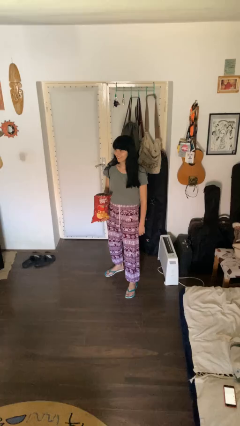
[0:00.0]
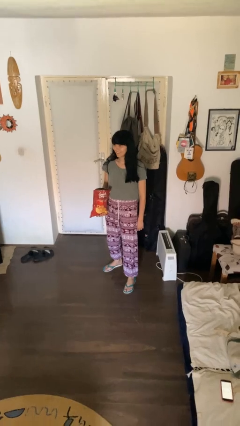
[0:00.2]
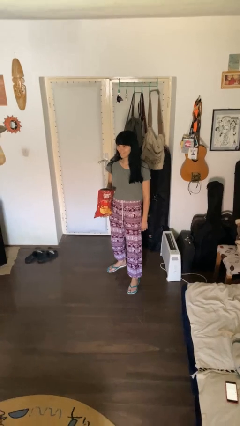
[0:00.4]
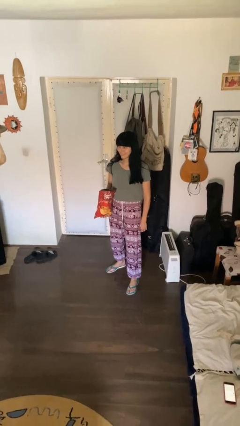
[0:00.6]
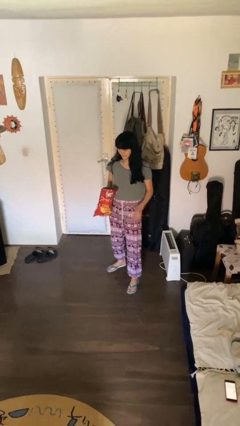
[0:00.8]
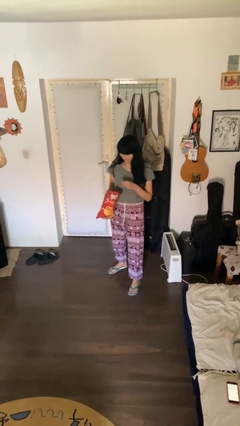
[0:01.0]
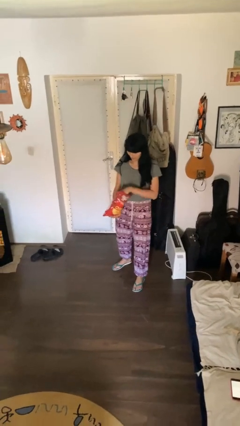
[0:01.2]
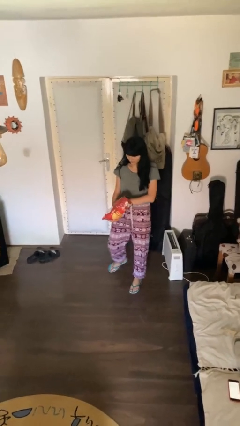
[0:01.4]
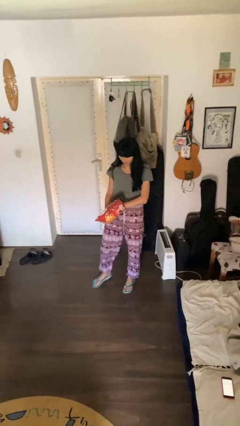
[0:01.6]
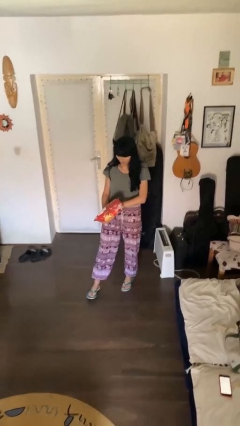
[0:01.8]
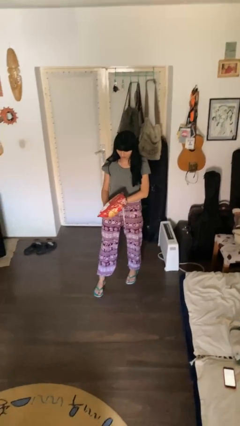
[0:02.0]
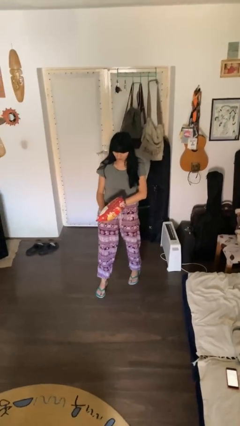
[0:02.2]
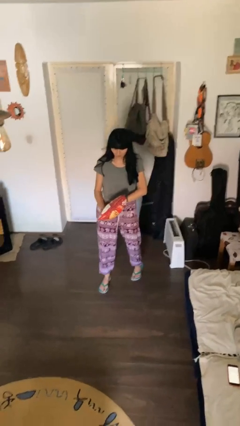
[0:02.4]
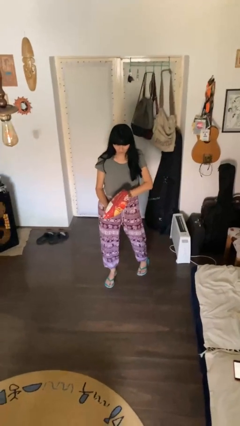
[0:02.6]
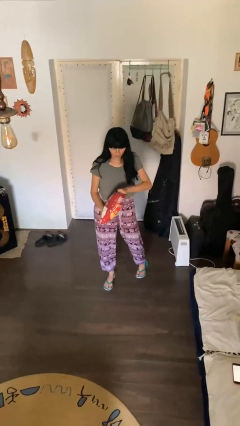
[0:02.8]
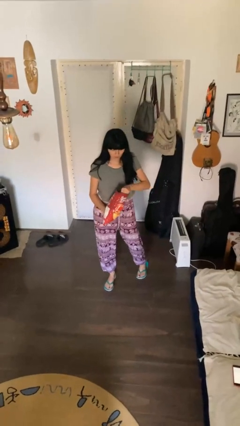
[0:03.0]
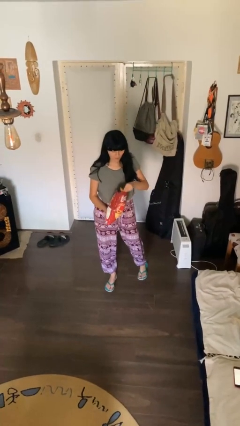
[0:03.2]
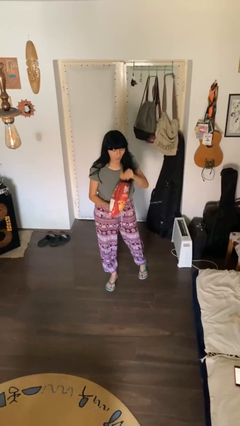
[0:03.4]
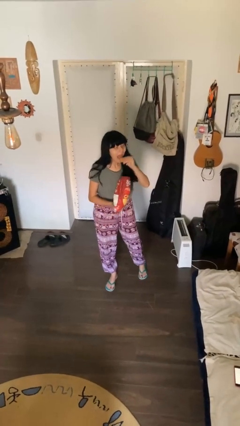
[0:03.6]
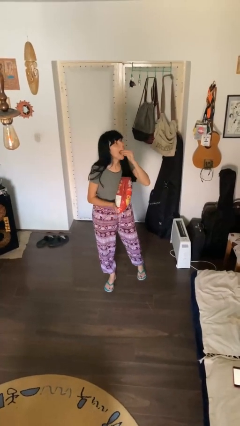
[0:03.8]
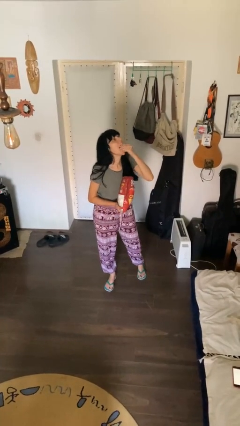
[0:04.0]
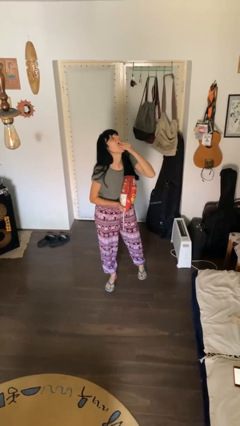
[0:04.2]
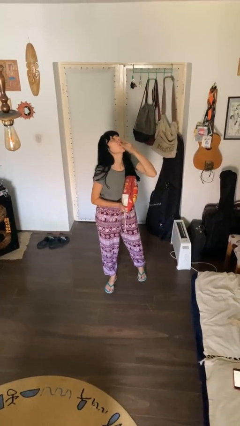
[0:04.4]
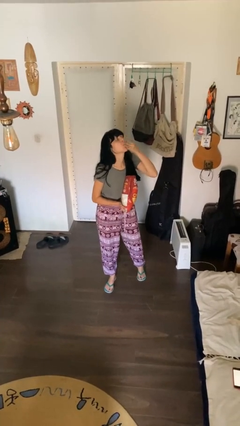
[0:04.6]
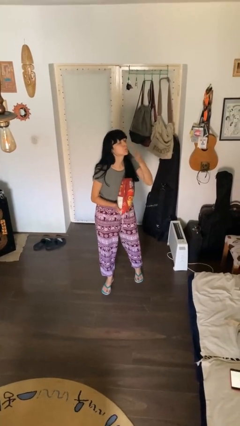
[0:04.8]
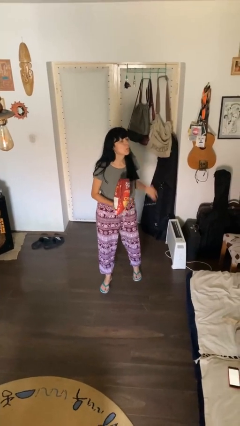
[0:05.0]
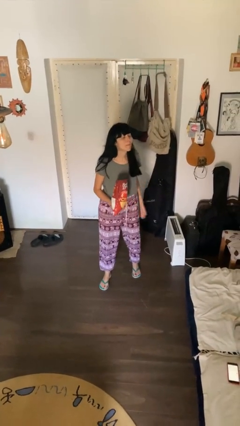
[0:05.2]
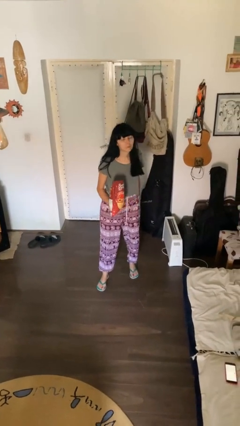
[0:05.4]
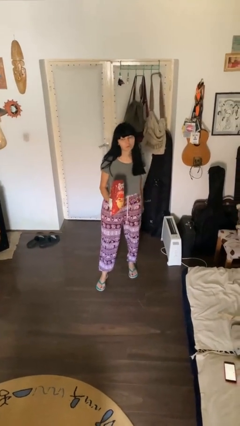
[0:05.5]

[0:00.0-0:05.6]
person eats snack from bag

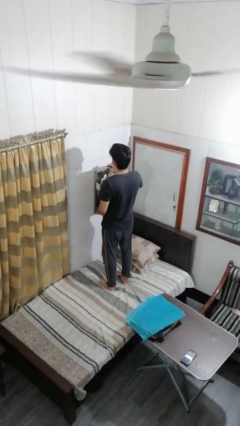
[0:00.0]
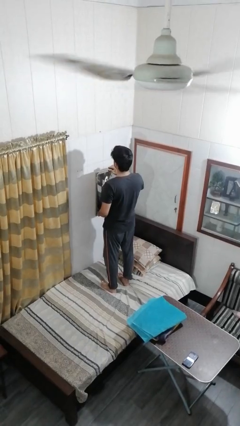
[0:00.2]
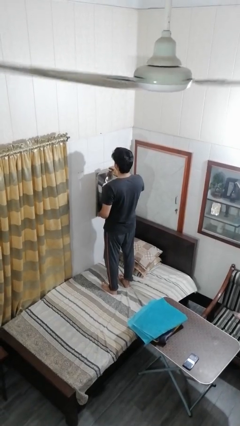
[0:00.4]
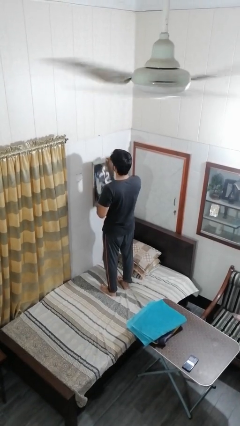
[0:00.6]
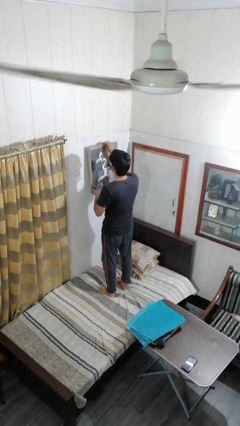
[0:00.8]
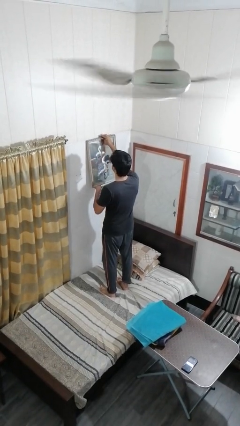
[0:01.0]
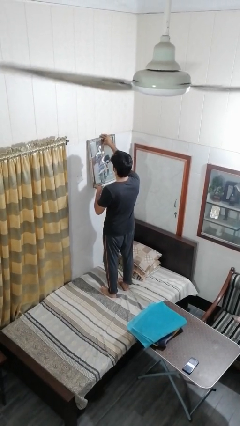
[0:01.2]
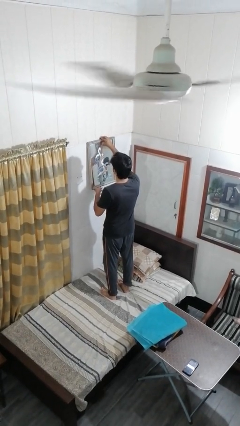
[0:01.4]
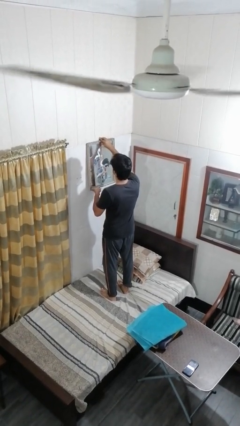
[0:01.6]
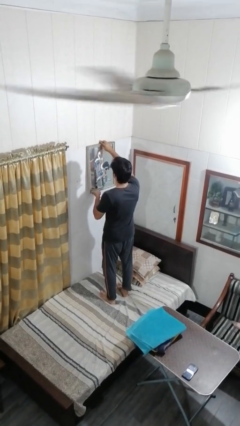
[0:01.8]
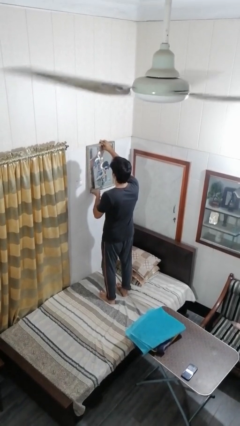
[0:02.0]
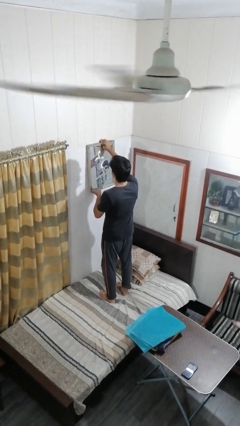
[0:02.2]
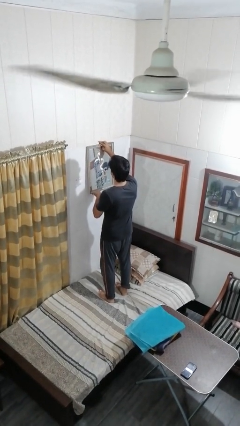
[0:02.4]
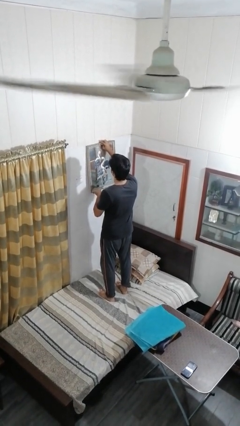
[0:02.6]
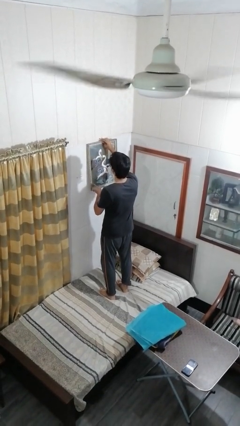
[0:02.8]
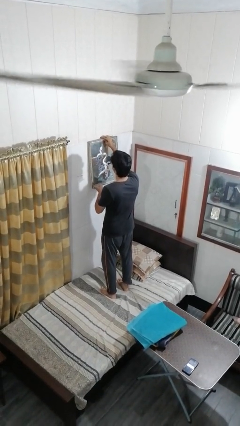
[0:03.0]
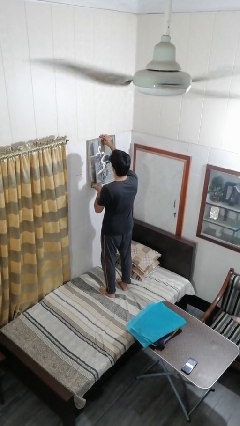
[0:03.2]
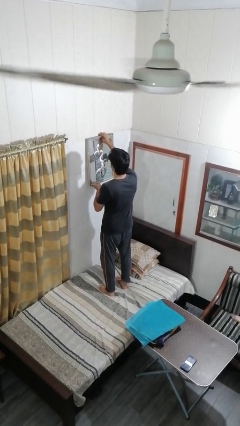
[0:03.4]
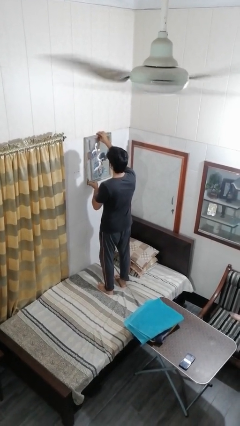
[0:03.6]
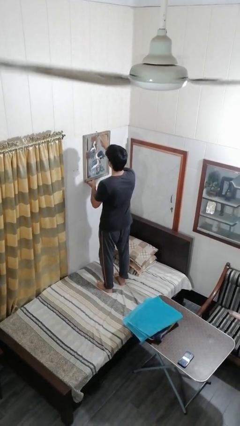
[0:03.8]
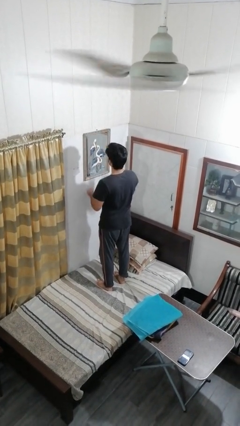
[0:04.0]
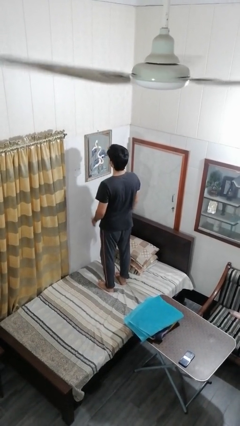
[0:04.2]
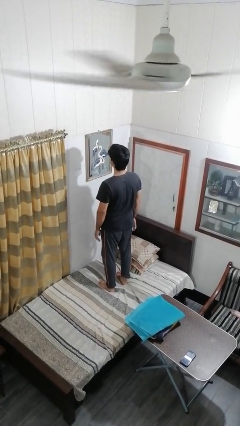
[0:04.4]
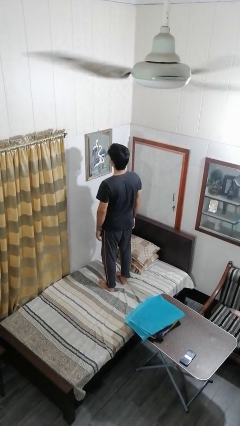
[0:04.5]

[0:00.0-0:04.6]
person puts up picture frame

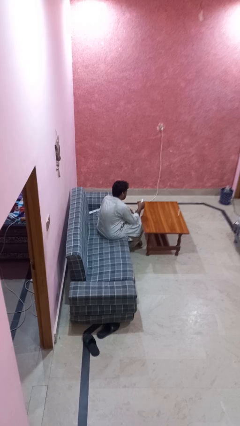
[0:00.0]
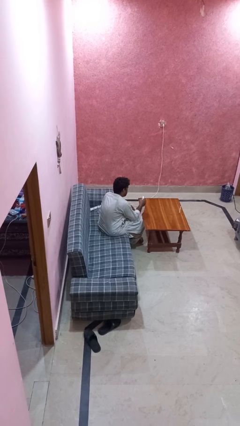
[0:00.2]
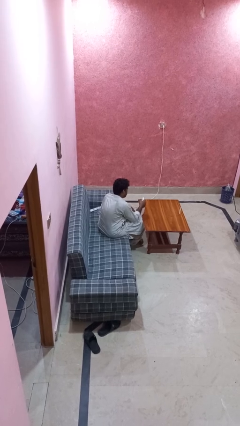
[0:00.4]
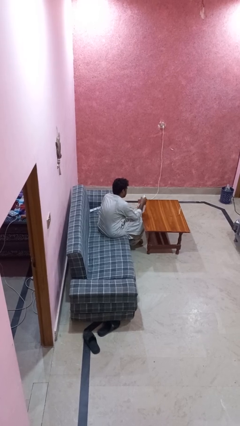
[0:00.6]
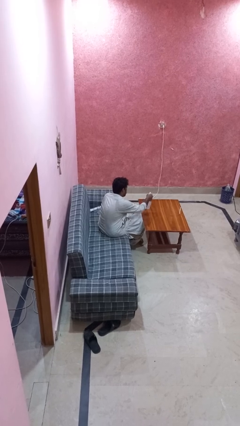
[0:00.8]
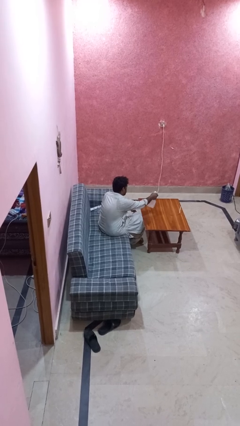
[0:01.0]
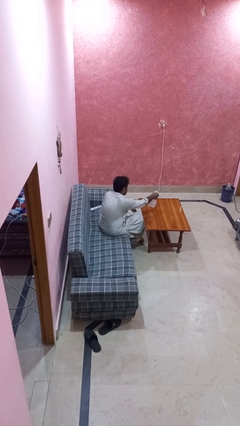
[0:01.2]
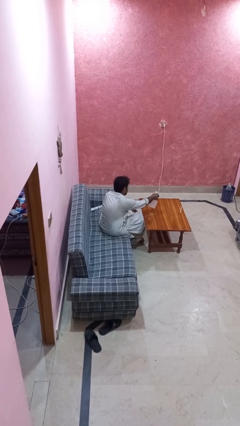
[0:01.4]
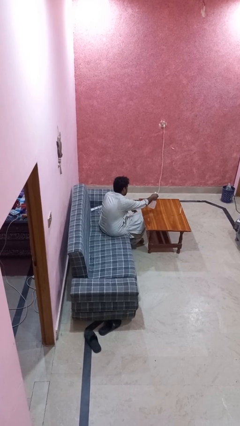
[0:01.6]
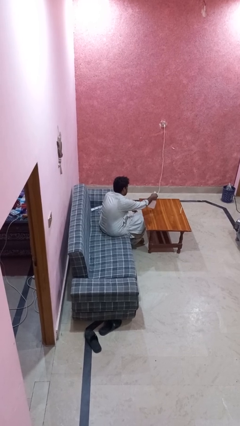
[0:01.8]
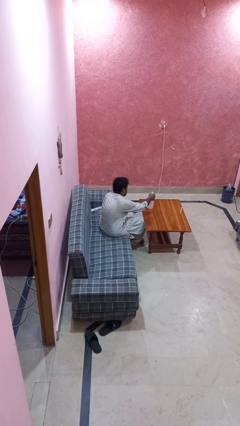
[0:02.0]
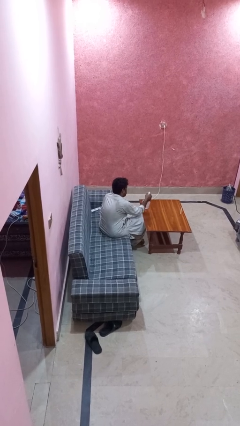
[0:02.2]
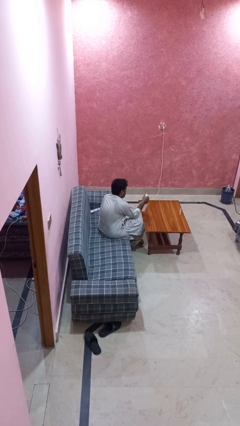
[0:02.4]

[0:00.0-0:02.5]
person sprays from bottle

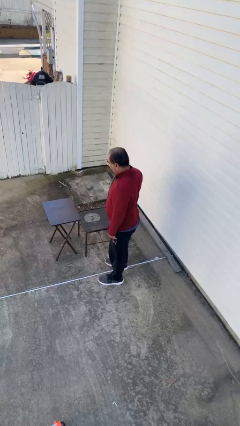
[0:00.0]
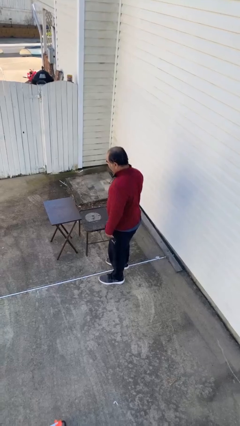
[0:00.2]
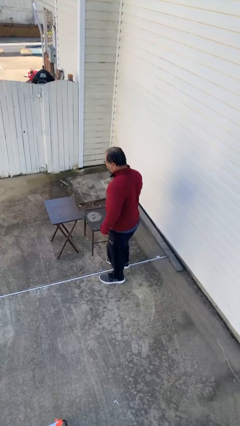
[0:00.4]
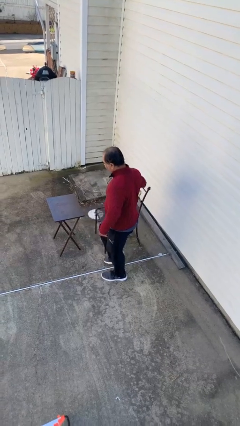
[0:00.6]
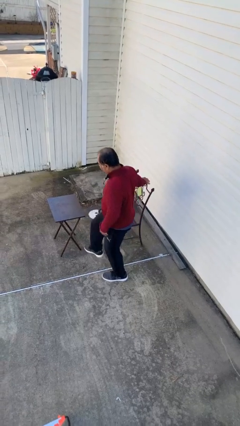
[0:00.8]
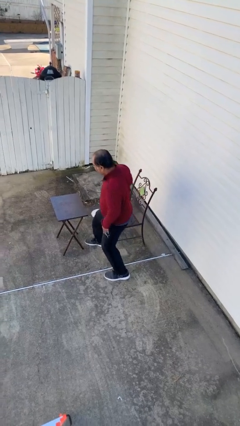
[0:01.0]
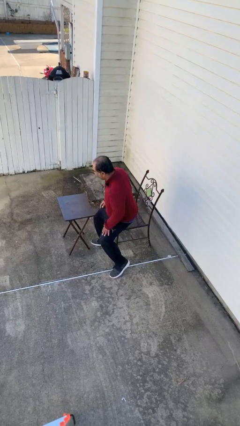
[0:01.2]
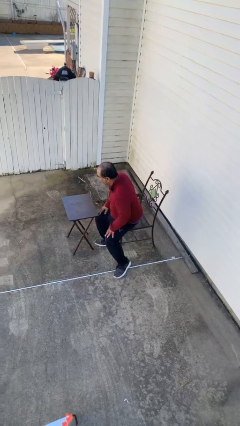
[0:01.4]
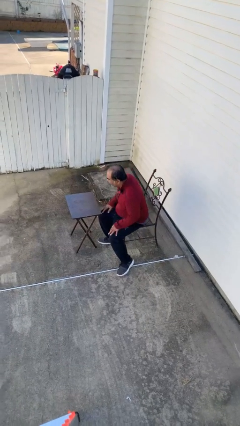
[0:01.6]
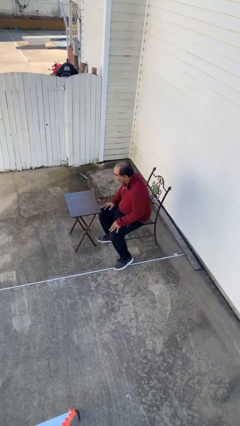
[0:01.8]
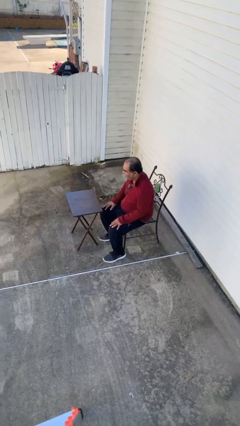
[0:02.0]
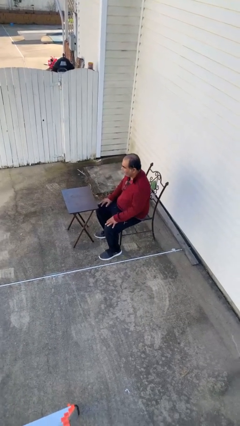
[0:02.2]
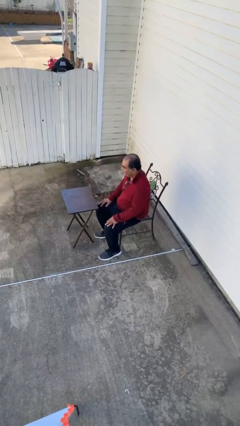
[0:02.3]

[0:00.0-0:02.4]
person sits down

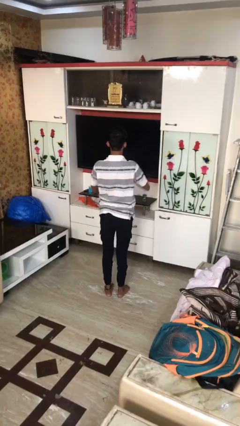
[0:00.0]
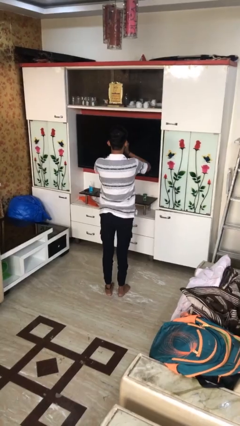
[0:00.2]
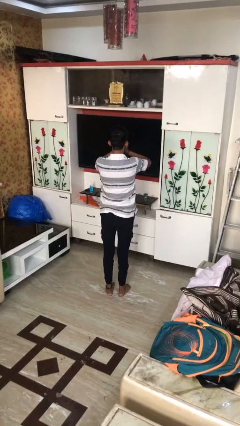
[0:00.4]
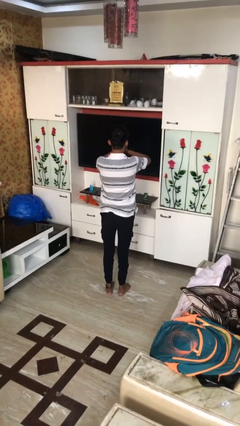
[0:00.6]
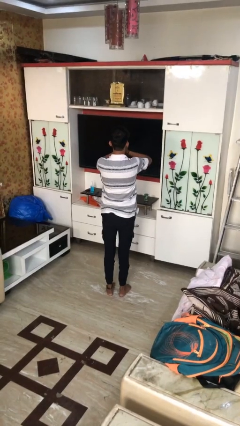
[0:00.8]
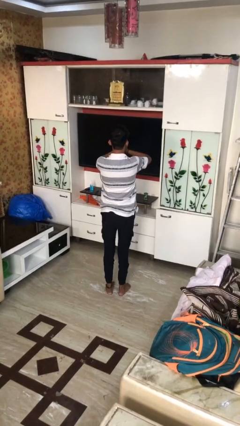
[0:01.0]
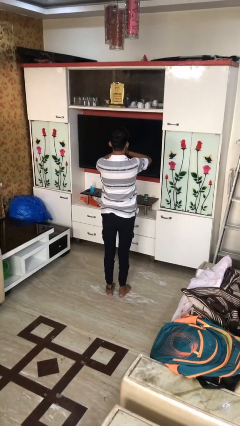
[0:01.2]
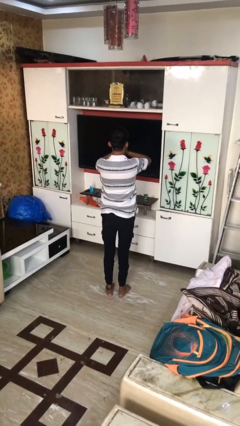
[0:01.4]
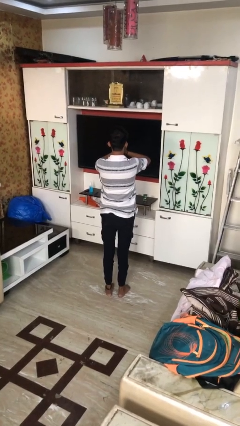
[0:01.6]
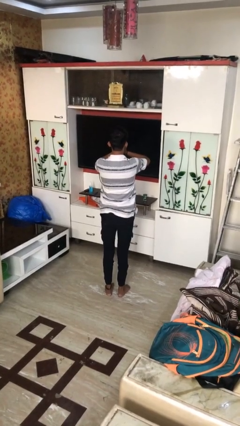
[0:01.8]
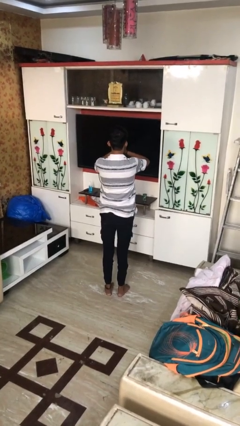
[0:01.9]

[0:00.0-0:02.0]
person covers face with hands

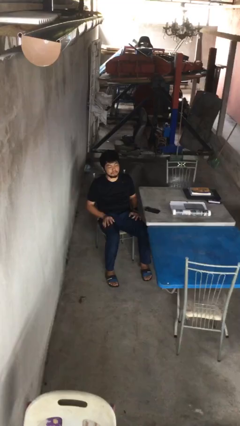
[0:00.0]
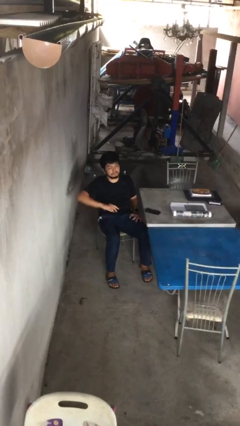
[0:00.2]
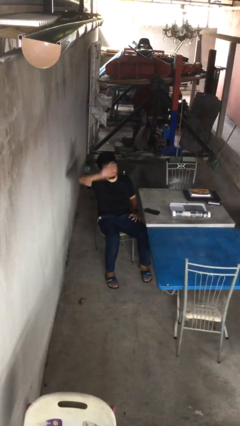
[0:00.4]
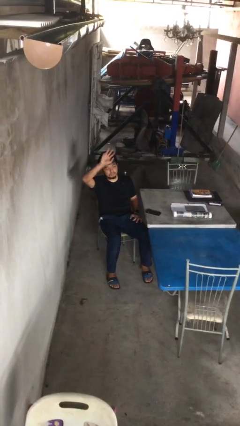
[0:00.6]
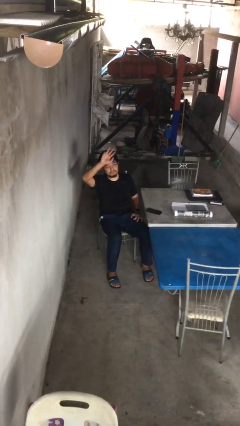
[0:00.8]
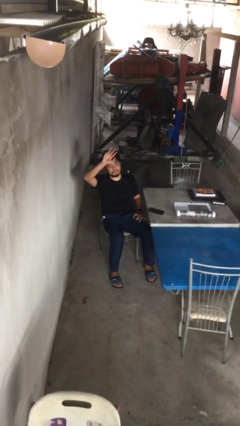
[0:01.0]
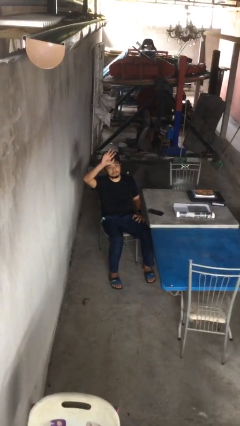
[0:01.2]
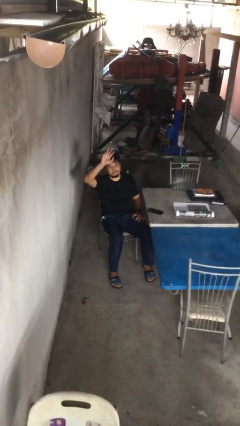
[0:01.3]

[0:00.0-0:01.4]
person gestures swipe up
